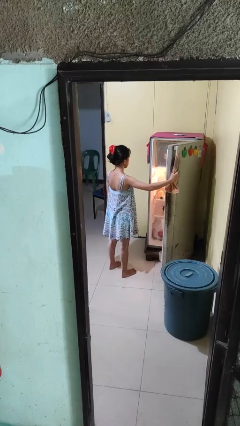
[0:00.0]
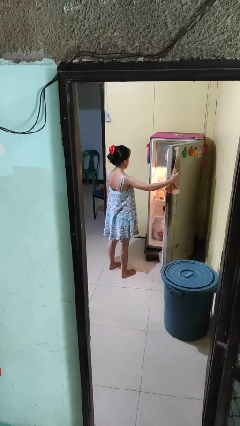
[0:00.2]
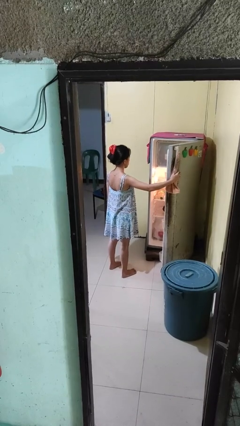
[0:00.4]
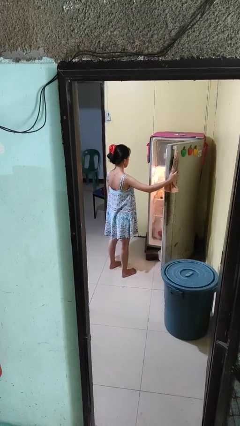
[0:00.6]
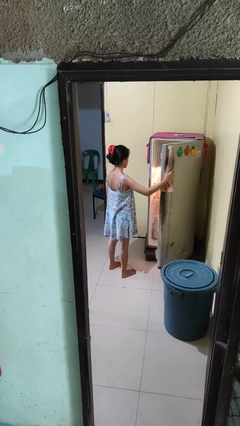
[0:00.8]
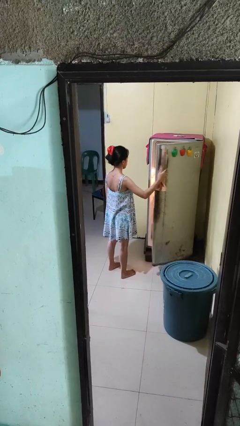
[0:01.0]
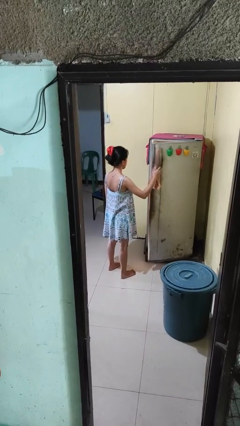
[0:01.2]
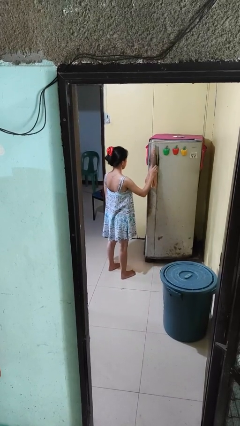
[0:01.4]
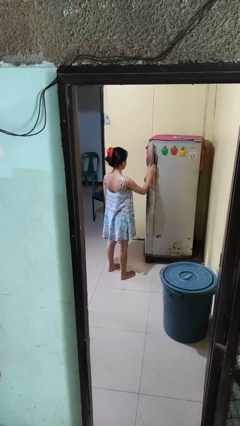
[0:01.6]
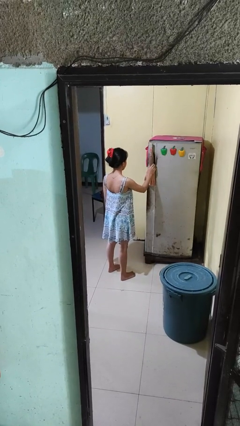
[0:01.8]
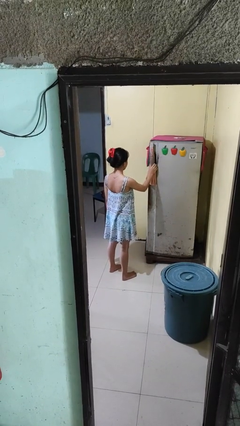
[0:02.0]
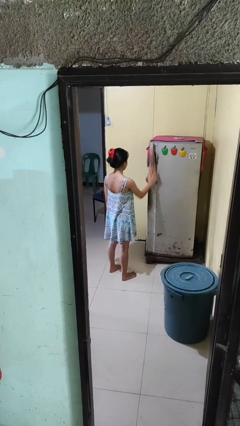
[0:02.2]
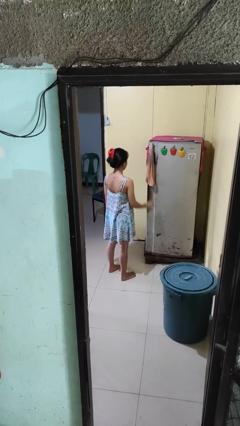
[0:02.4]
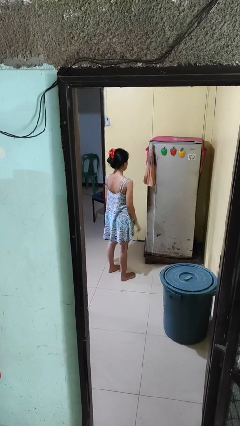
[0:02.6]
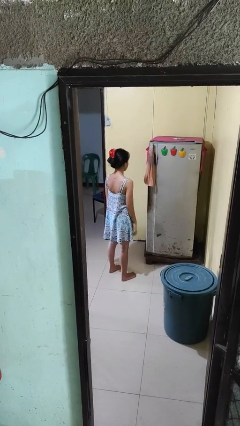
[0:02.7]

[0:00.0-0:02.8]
person closes refrigerator

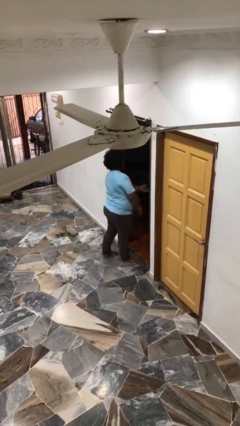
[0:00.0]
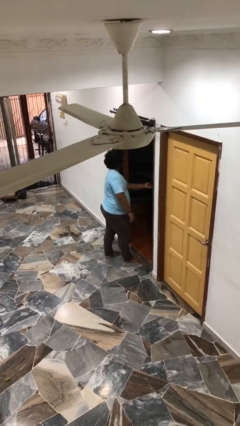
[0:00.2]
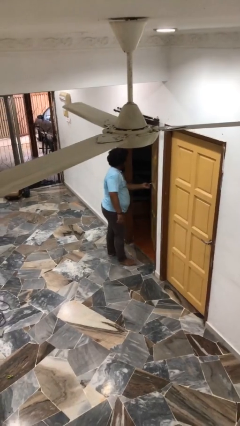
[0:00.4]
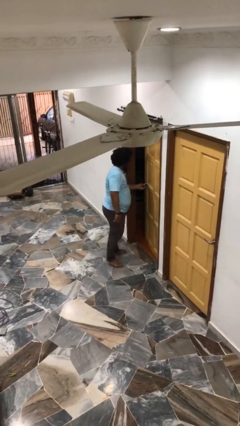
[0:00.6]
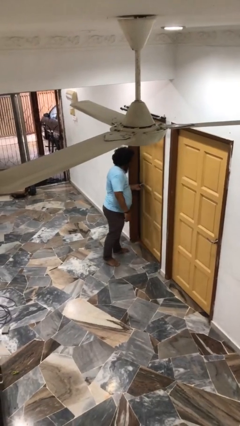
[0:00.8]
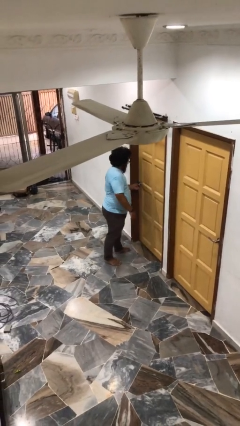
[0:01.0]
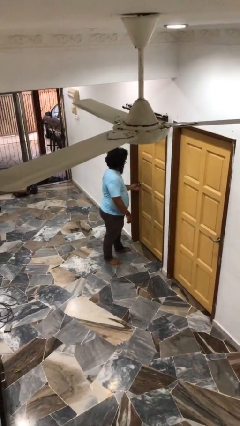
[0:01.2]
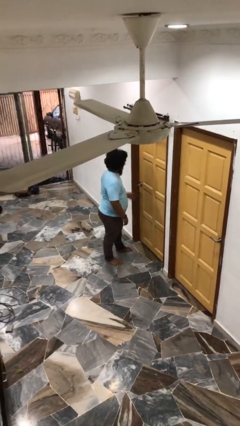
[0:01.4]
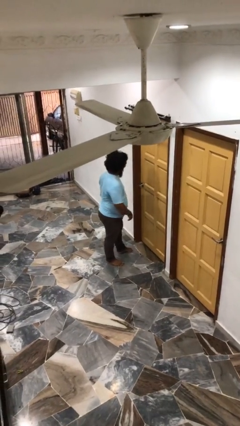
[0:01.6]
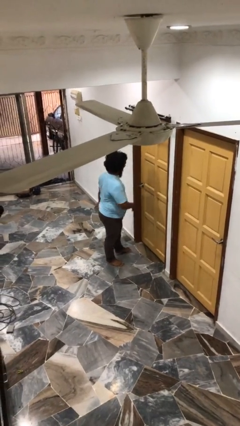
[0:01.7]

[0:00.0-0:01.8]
person closes facility door

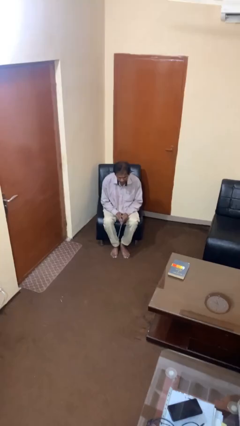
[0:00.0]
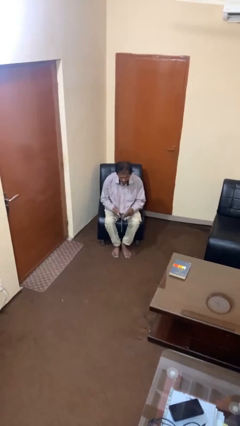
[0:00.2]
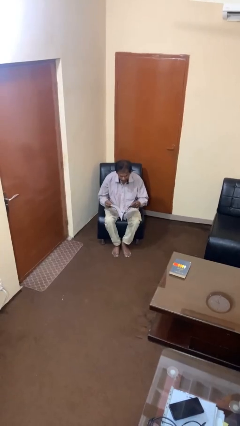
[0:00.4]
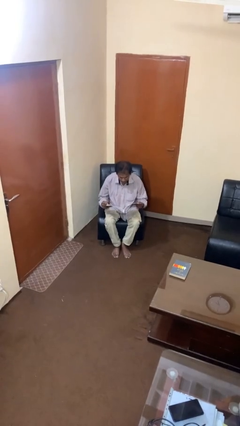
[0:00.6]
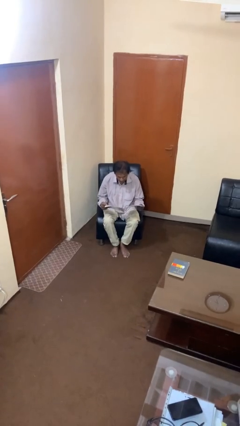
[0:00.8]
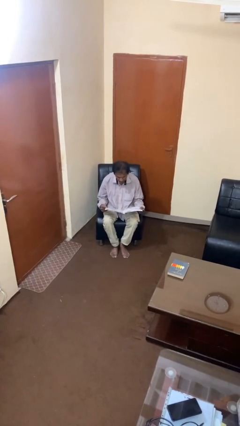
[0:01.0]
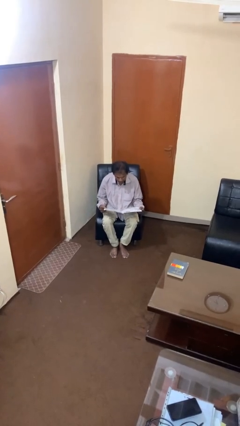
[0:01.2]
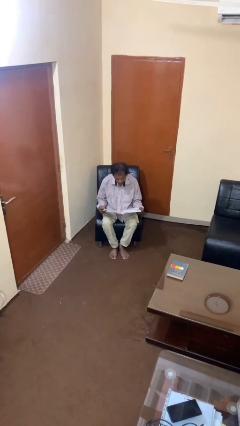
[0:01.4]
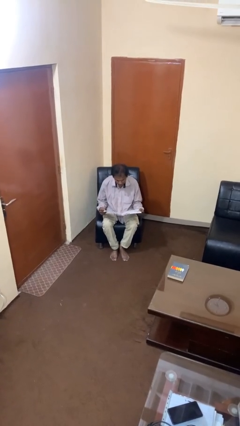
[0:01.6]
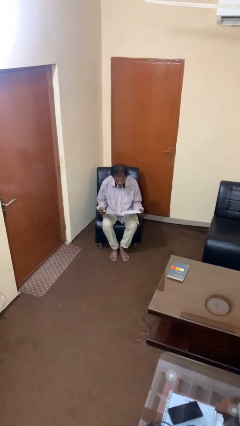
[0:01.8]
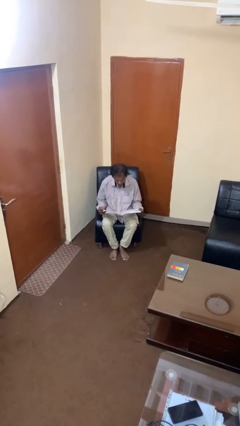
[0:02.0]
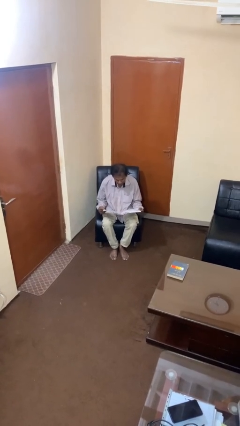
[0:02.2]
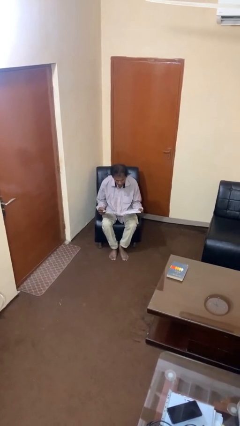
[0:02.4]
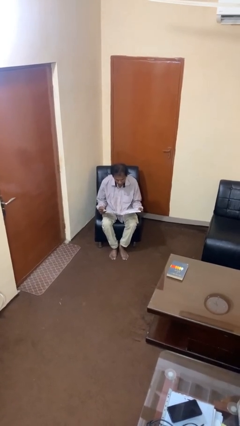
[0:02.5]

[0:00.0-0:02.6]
person reads magazine

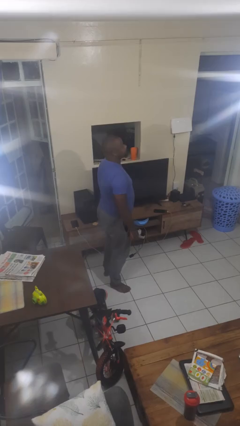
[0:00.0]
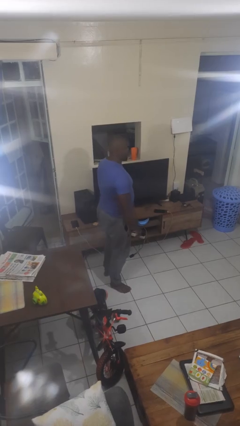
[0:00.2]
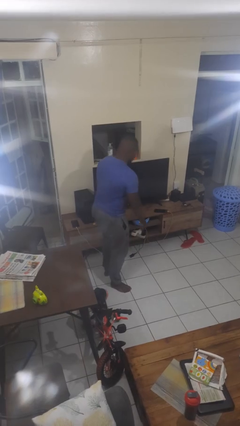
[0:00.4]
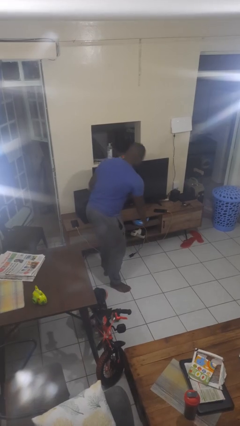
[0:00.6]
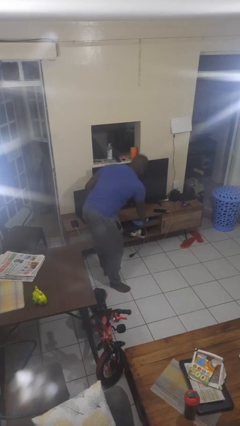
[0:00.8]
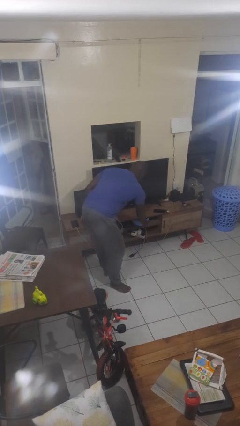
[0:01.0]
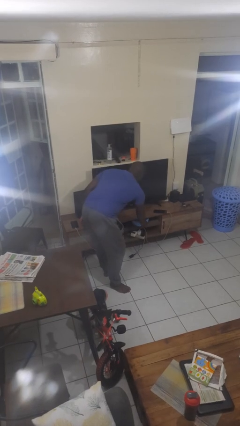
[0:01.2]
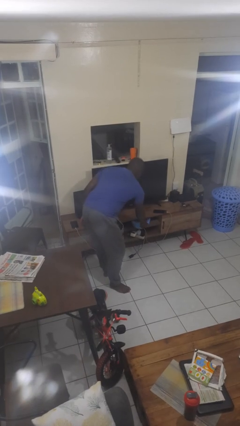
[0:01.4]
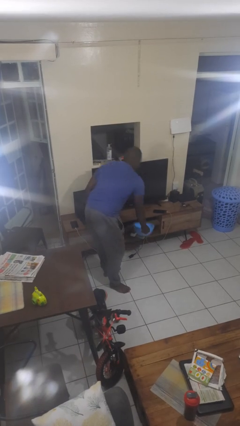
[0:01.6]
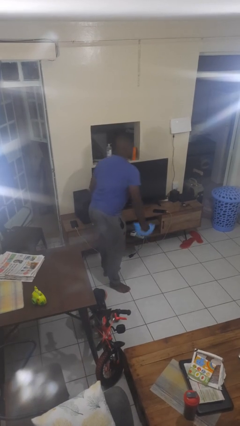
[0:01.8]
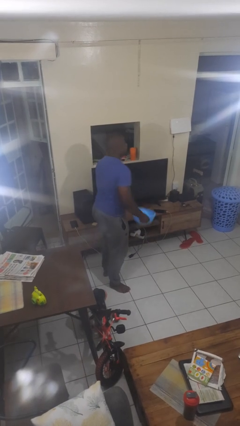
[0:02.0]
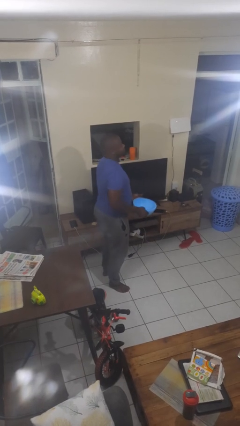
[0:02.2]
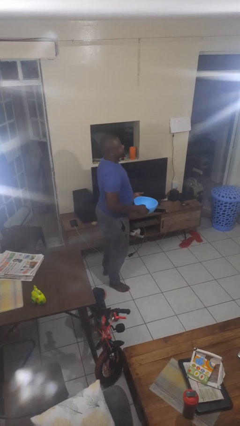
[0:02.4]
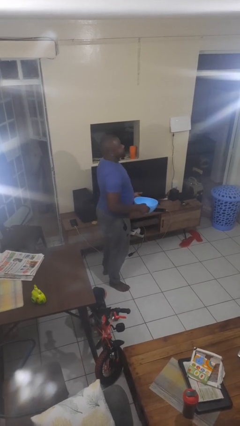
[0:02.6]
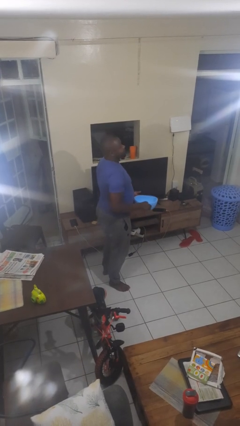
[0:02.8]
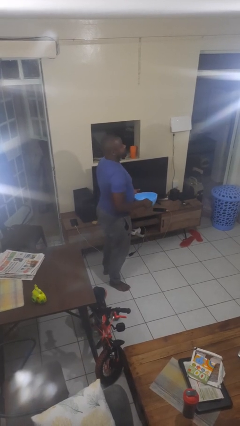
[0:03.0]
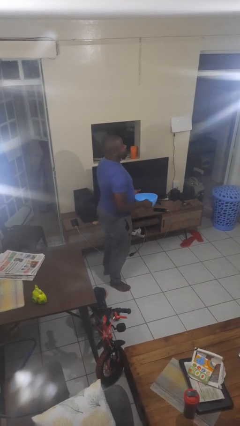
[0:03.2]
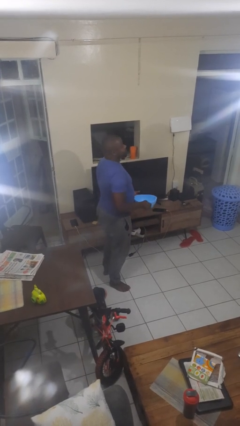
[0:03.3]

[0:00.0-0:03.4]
person picks up object from cabinet

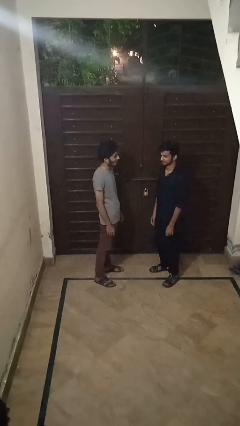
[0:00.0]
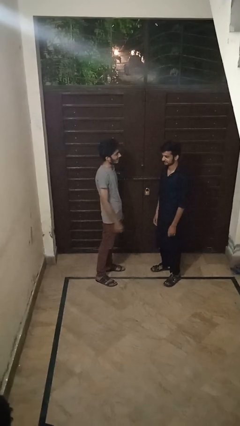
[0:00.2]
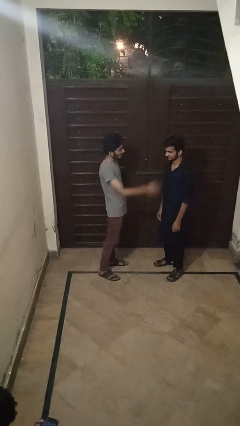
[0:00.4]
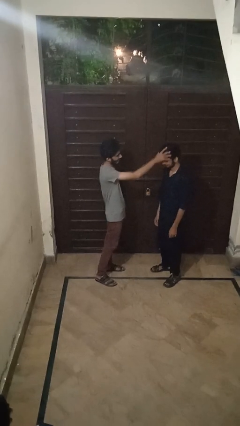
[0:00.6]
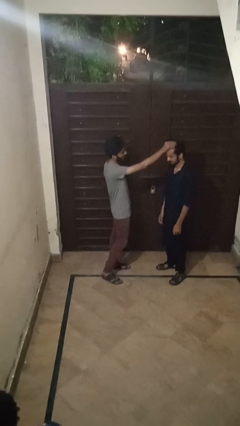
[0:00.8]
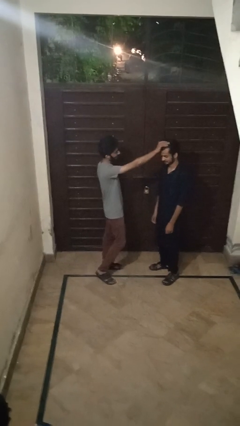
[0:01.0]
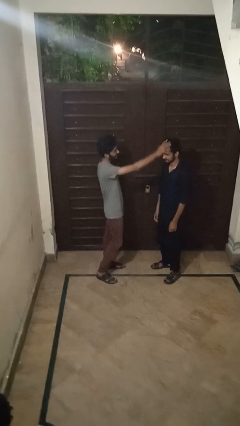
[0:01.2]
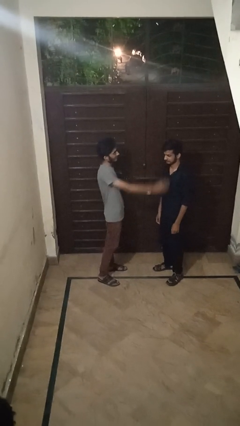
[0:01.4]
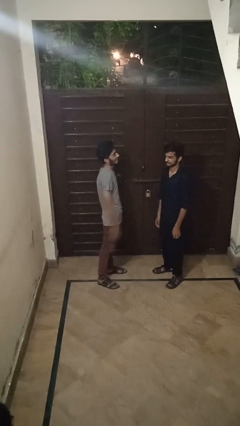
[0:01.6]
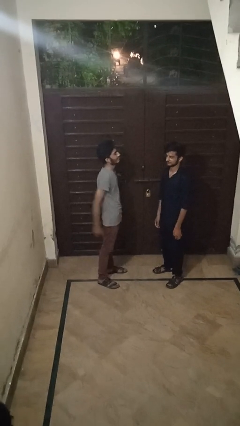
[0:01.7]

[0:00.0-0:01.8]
person grabs person by hair

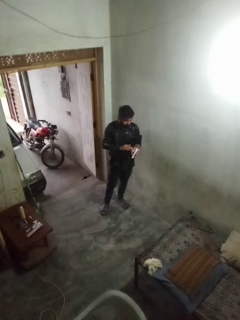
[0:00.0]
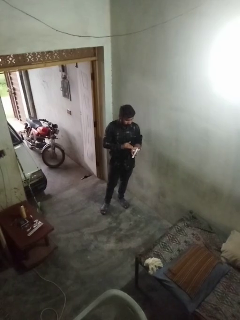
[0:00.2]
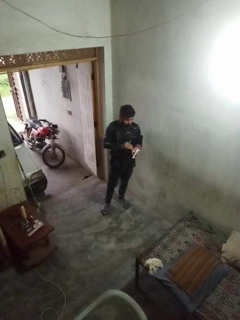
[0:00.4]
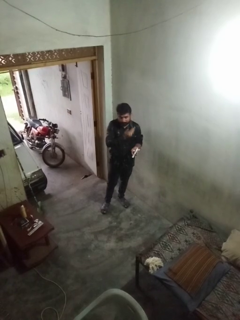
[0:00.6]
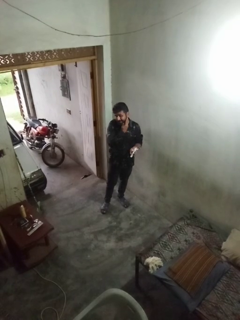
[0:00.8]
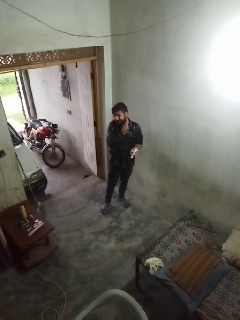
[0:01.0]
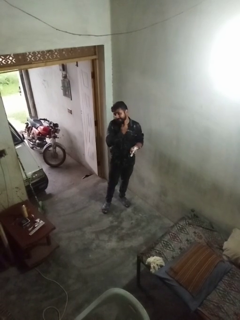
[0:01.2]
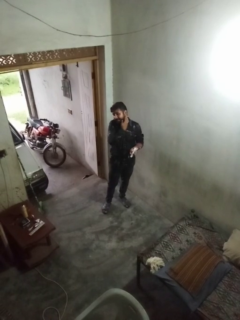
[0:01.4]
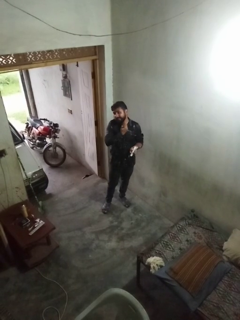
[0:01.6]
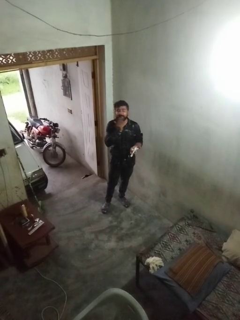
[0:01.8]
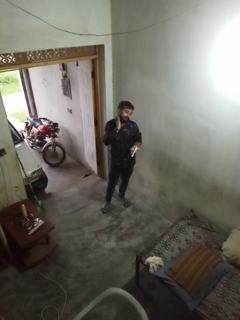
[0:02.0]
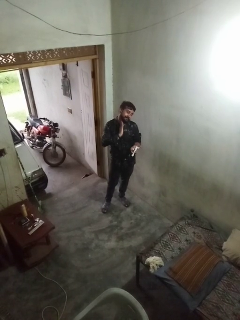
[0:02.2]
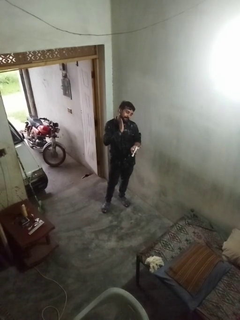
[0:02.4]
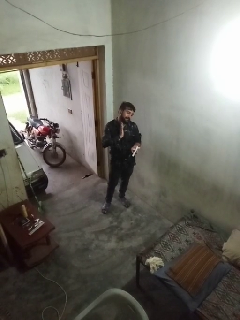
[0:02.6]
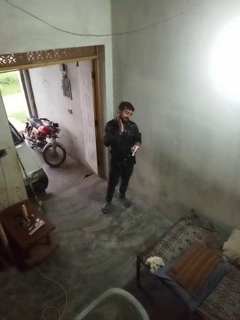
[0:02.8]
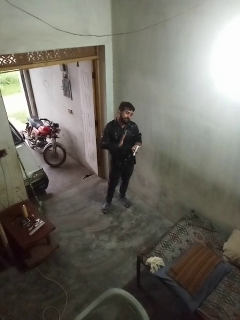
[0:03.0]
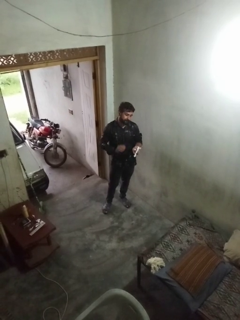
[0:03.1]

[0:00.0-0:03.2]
person applies sunscreen

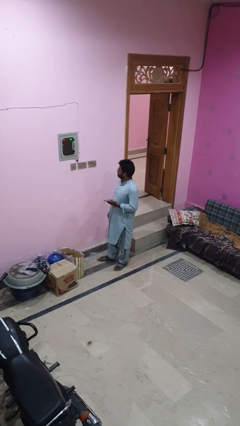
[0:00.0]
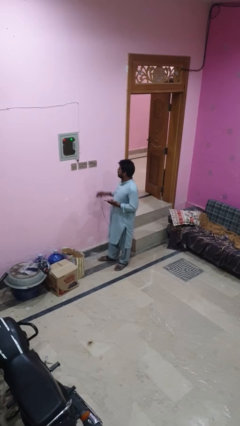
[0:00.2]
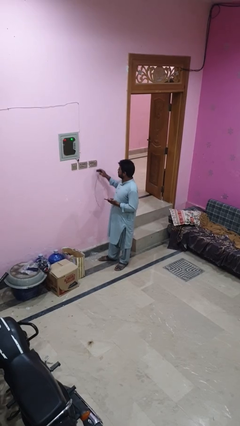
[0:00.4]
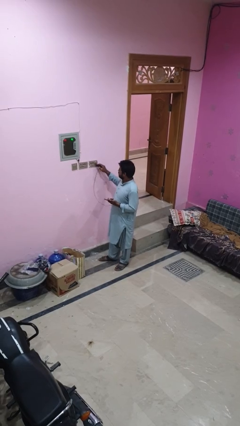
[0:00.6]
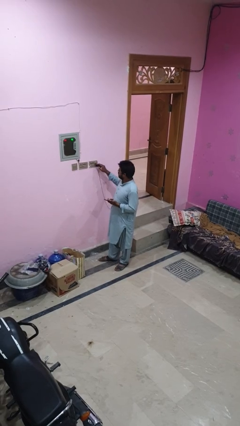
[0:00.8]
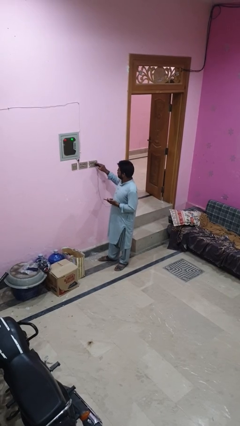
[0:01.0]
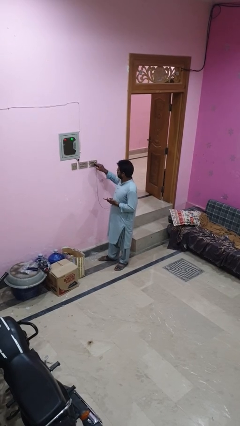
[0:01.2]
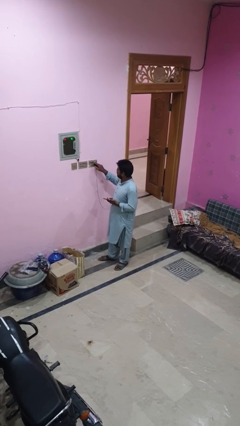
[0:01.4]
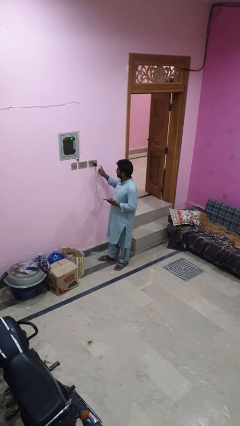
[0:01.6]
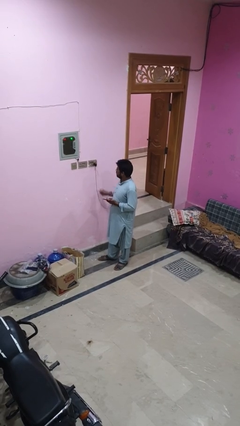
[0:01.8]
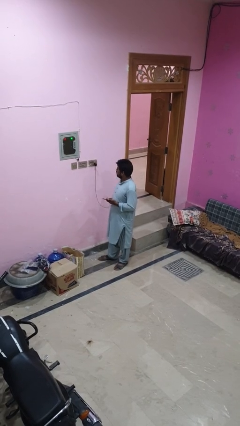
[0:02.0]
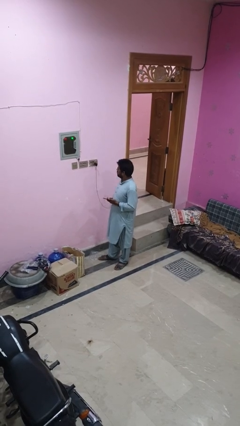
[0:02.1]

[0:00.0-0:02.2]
person plugs into electrical socket

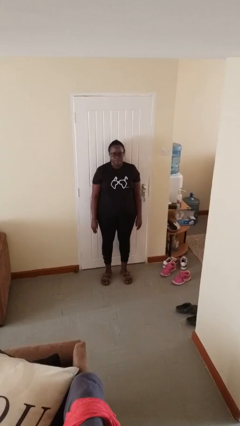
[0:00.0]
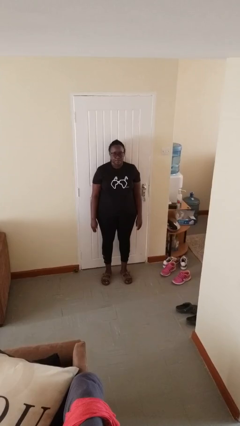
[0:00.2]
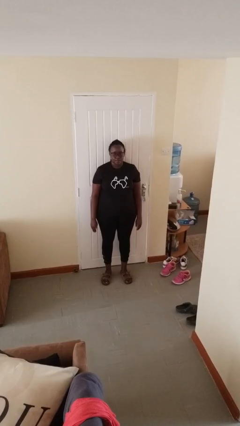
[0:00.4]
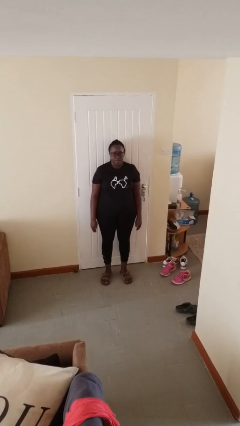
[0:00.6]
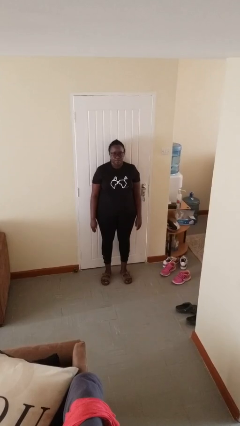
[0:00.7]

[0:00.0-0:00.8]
person gestures stop
